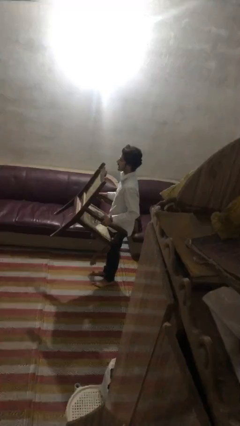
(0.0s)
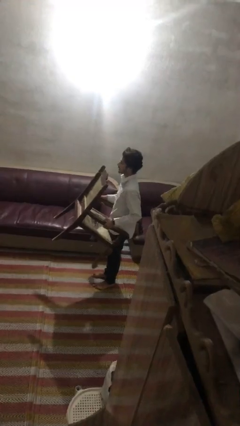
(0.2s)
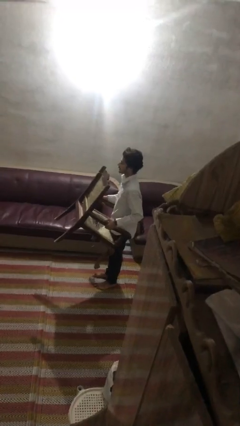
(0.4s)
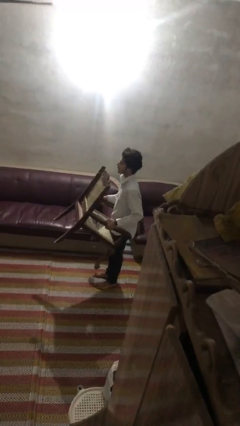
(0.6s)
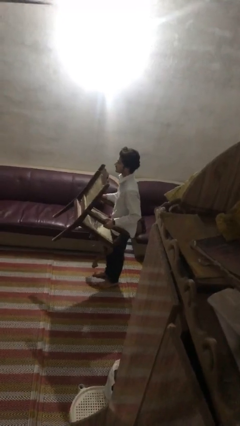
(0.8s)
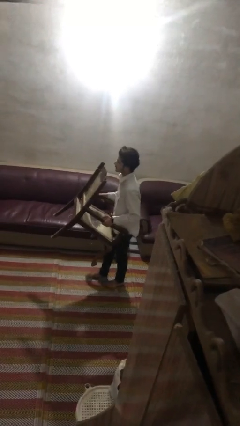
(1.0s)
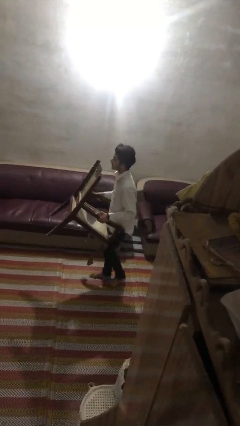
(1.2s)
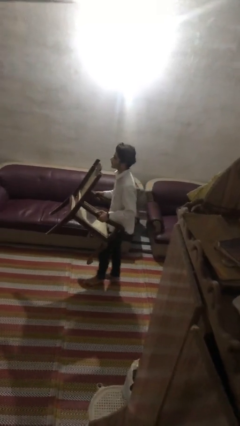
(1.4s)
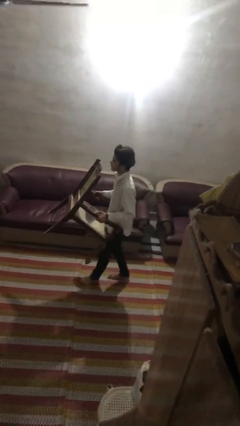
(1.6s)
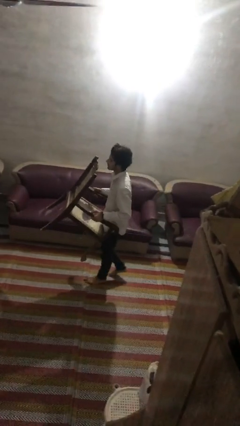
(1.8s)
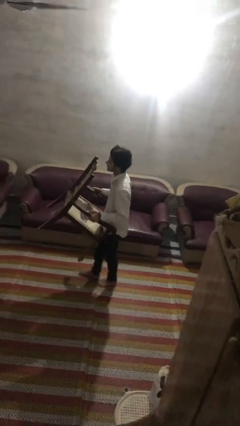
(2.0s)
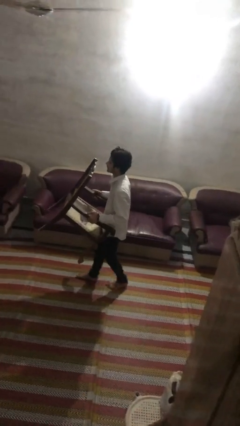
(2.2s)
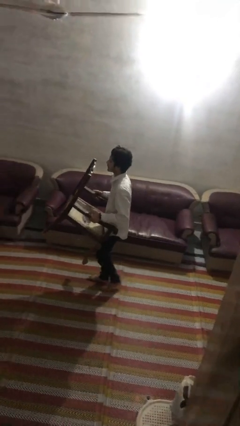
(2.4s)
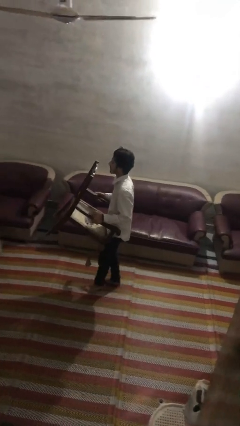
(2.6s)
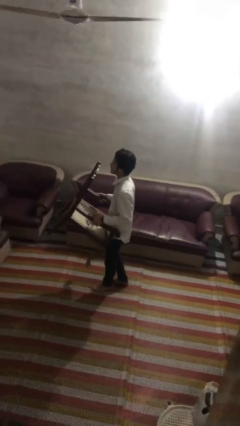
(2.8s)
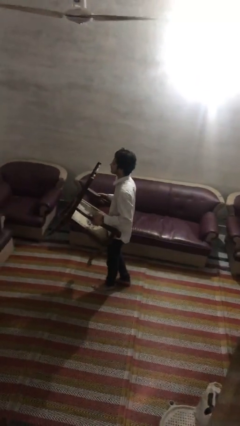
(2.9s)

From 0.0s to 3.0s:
person carries furniture

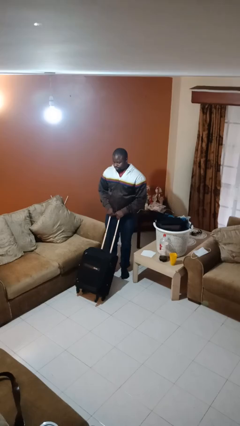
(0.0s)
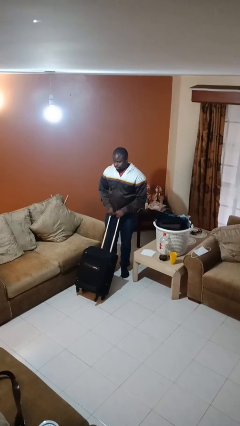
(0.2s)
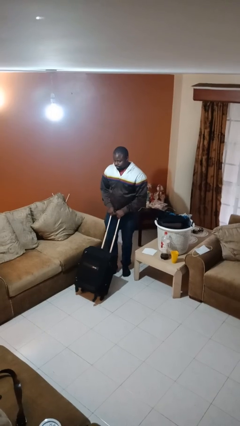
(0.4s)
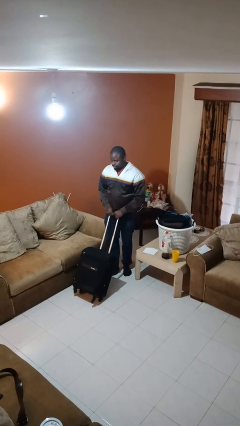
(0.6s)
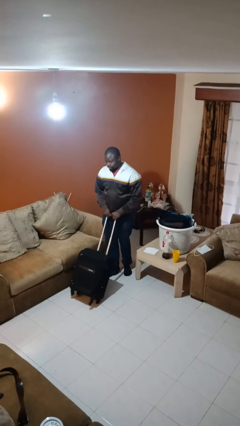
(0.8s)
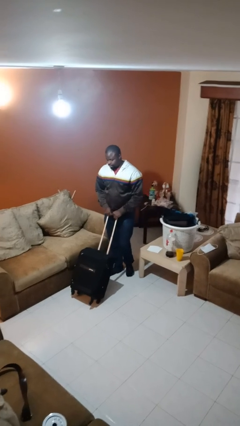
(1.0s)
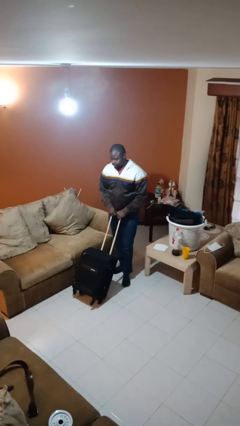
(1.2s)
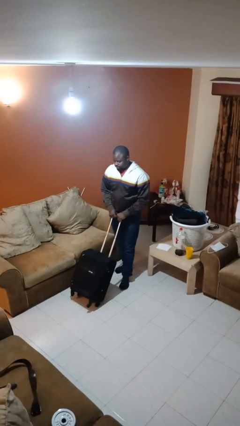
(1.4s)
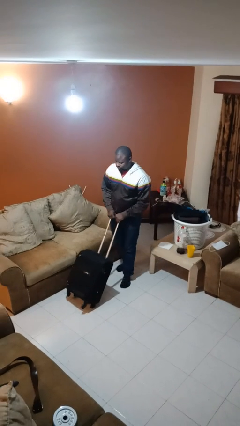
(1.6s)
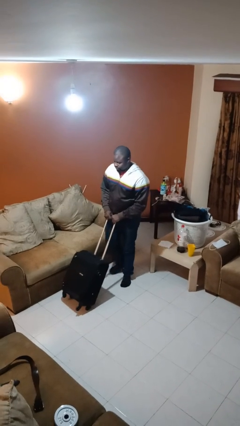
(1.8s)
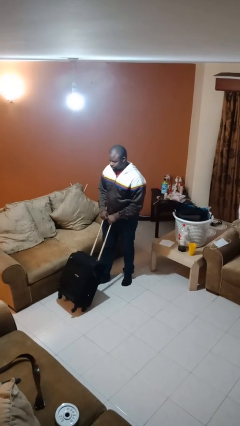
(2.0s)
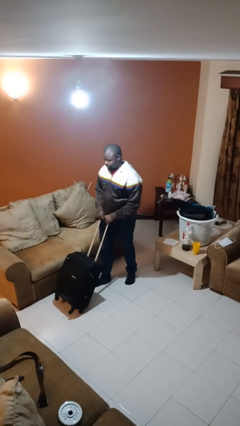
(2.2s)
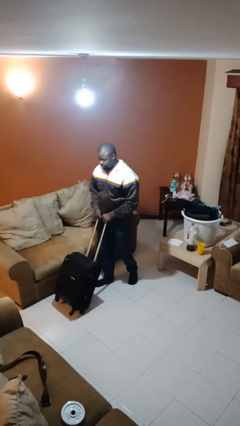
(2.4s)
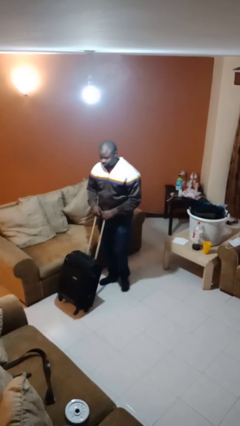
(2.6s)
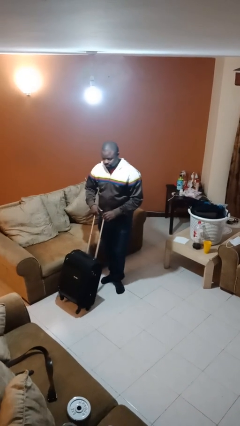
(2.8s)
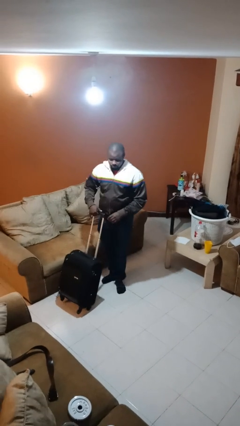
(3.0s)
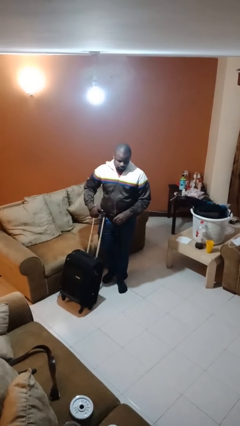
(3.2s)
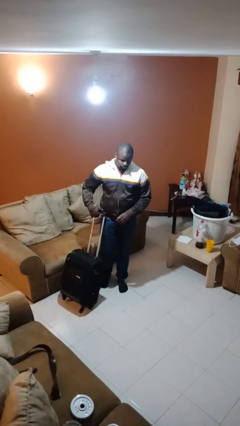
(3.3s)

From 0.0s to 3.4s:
person pushes wheeled cart

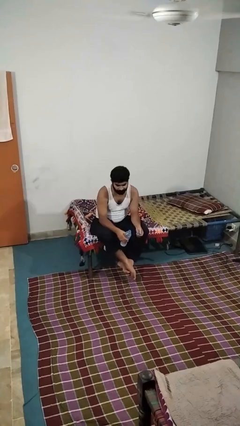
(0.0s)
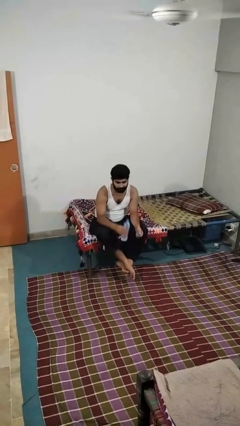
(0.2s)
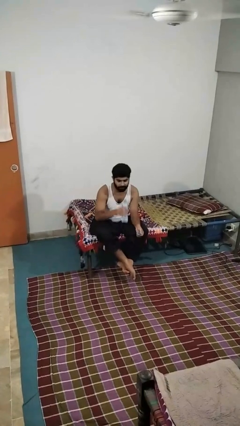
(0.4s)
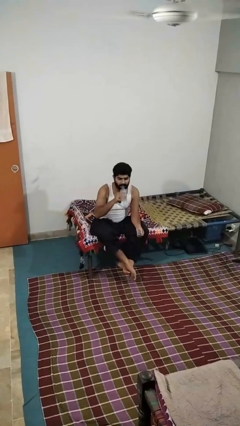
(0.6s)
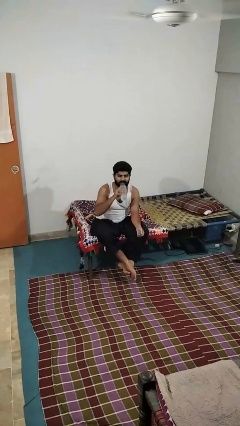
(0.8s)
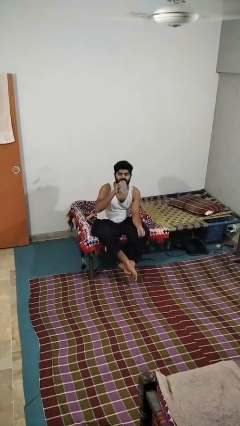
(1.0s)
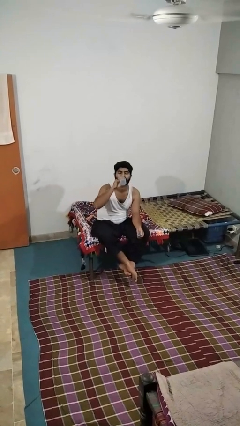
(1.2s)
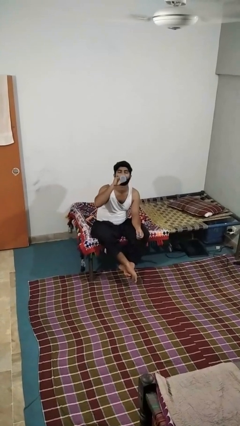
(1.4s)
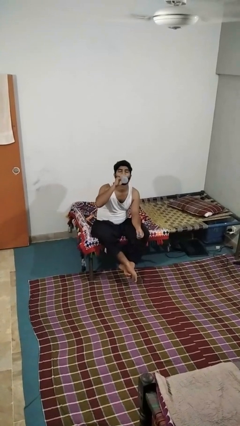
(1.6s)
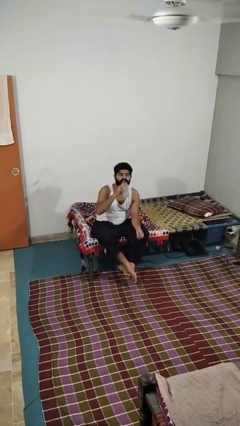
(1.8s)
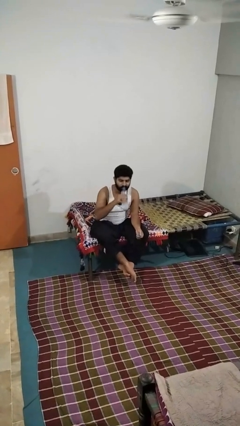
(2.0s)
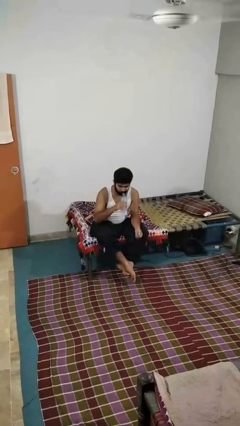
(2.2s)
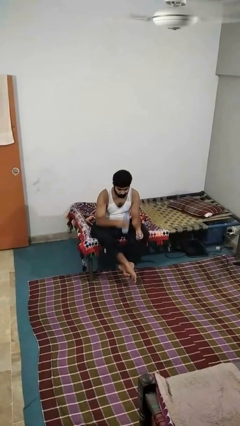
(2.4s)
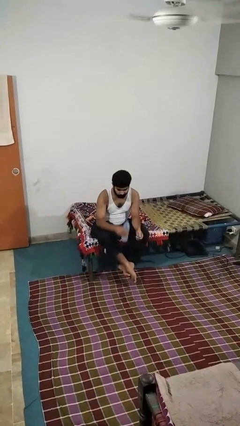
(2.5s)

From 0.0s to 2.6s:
person drinks from bottle

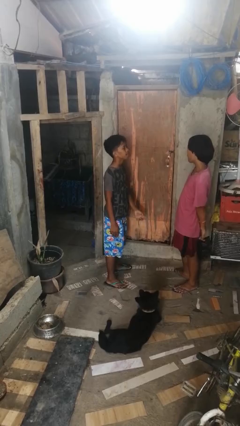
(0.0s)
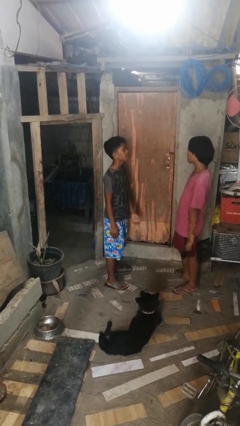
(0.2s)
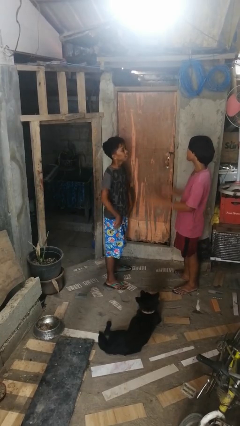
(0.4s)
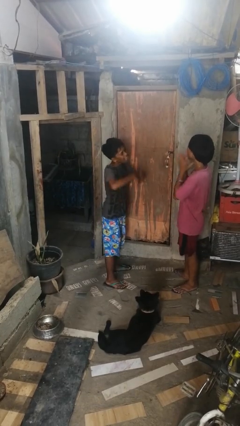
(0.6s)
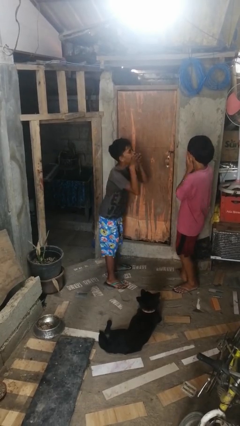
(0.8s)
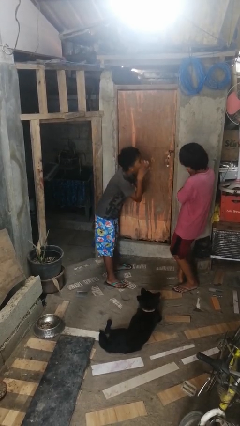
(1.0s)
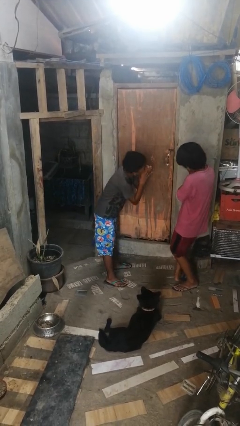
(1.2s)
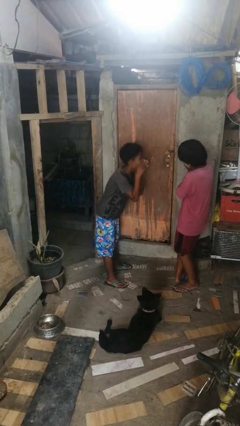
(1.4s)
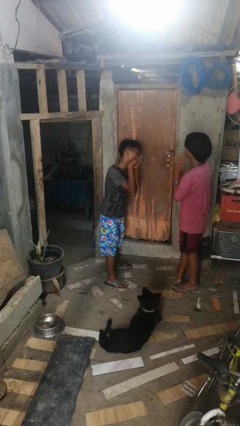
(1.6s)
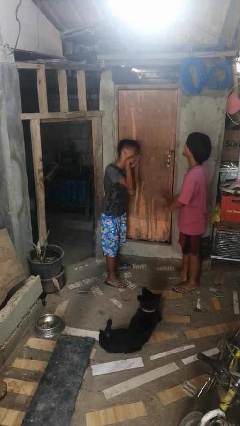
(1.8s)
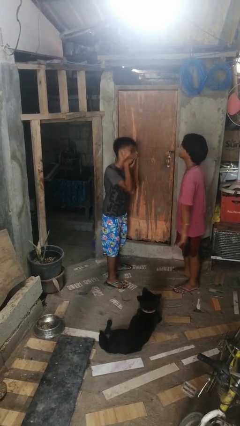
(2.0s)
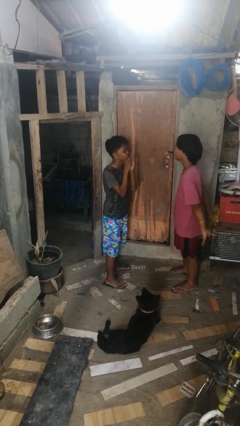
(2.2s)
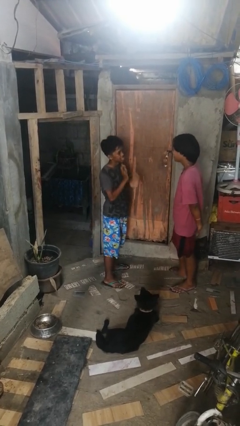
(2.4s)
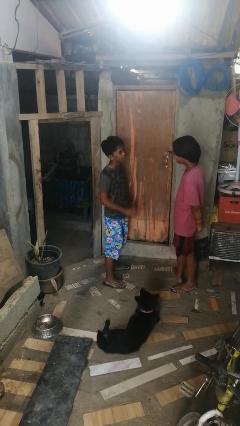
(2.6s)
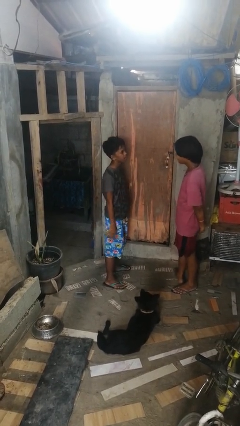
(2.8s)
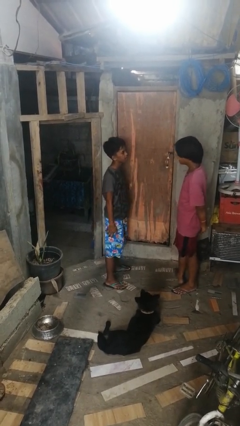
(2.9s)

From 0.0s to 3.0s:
person laughs with person

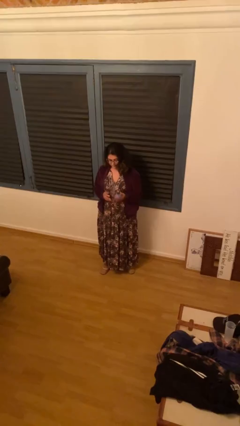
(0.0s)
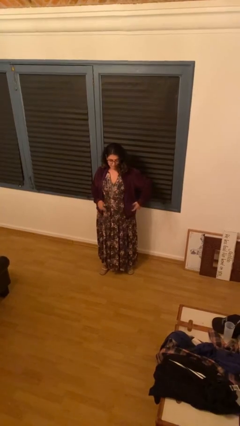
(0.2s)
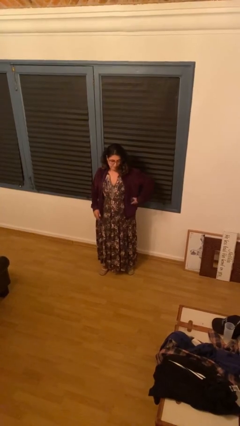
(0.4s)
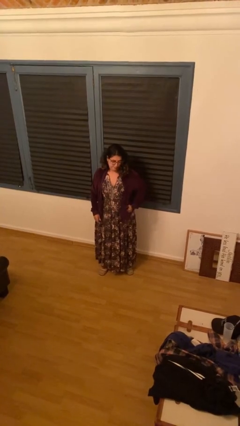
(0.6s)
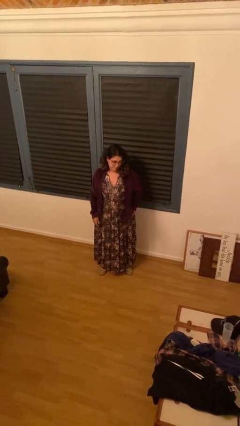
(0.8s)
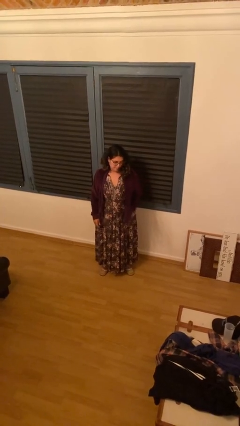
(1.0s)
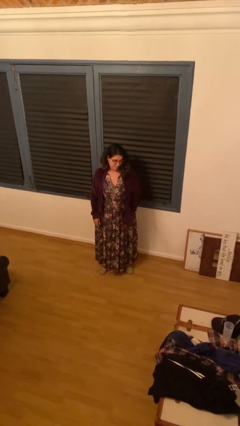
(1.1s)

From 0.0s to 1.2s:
person puts phone into pocket

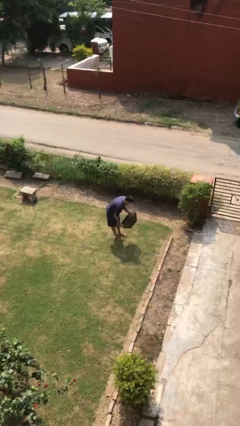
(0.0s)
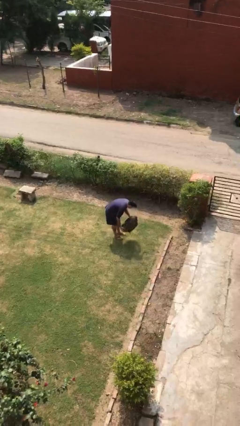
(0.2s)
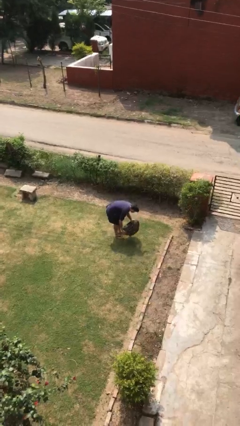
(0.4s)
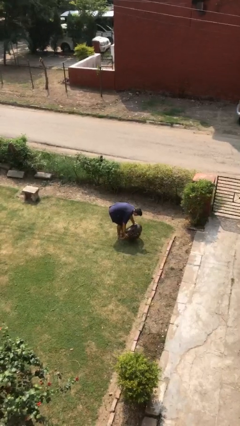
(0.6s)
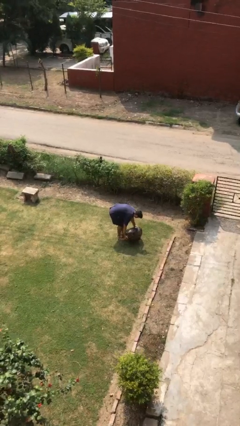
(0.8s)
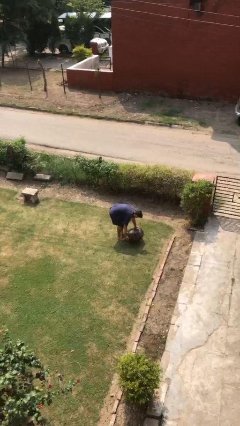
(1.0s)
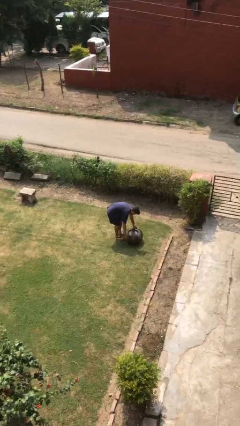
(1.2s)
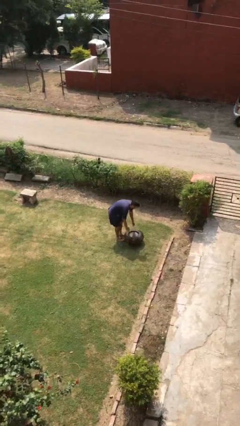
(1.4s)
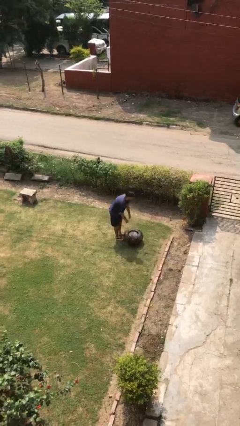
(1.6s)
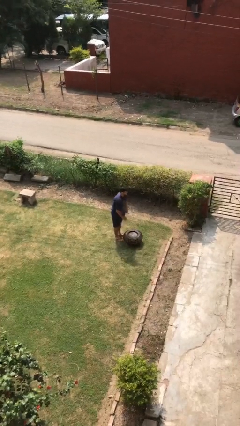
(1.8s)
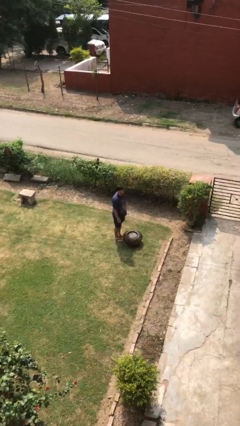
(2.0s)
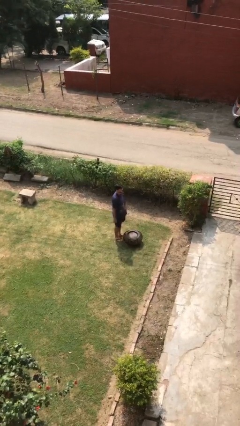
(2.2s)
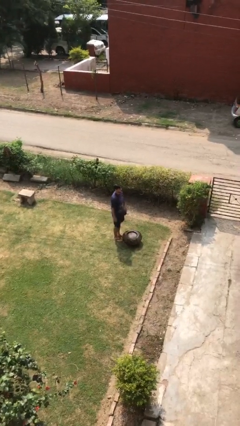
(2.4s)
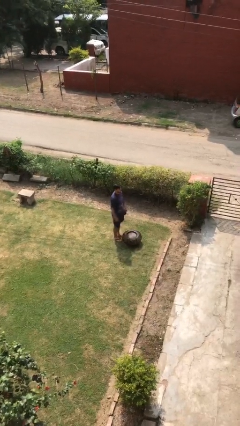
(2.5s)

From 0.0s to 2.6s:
person puts down object on floor

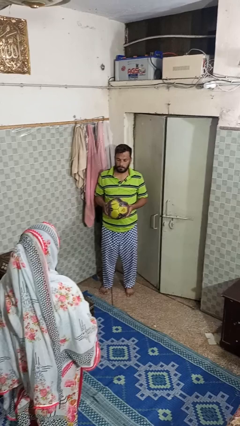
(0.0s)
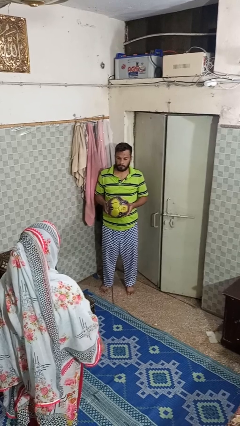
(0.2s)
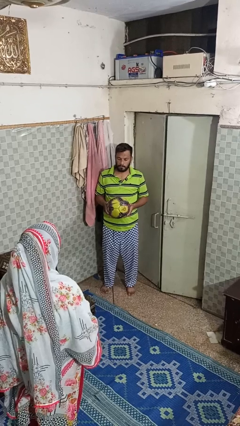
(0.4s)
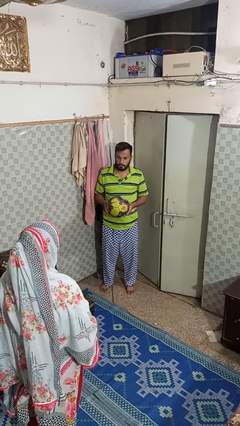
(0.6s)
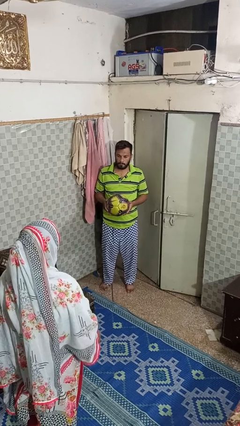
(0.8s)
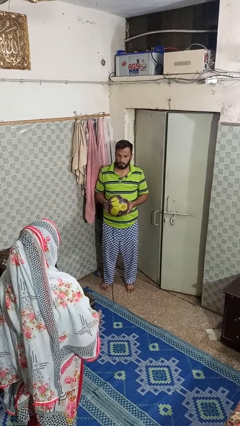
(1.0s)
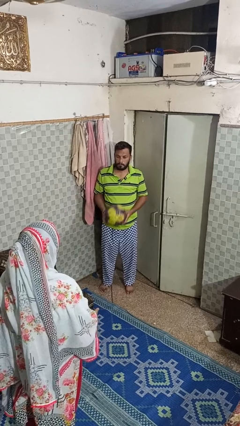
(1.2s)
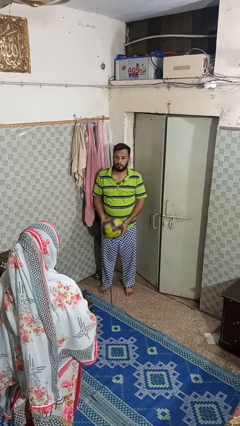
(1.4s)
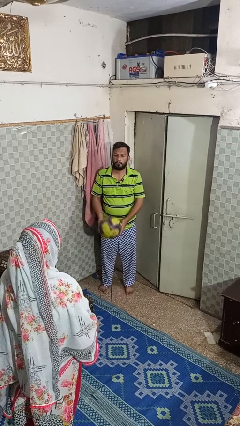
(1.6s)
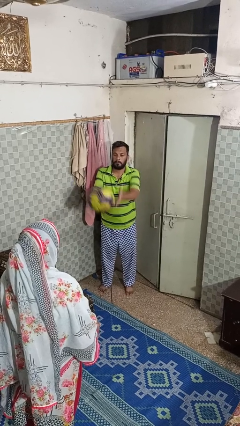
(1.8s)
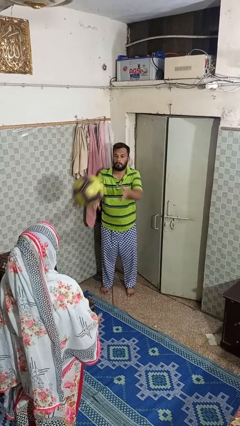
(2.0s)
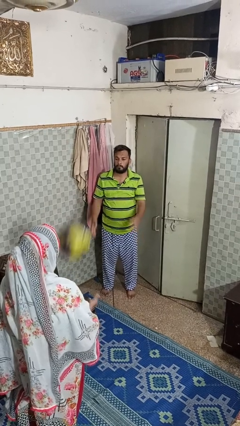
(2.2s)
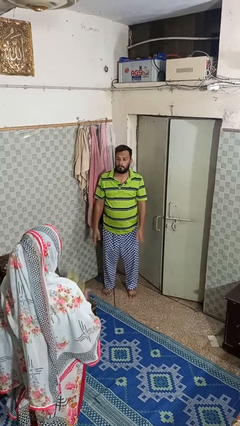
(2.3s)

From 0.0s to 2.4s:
person throws object to person
